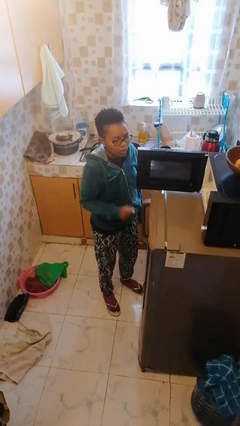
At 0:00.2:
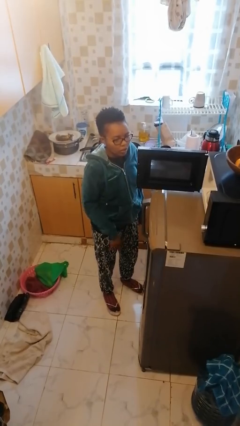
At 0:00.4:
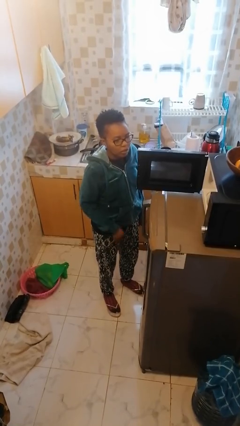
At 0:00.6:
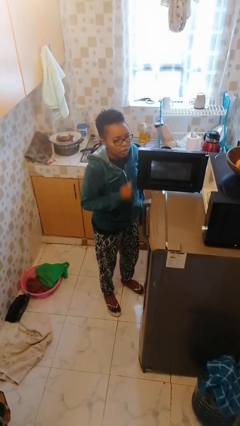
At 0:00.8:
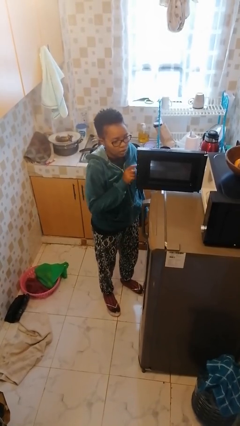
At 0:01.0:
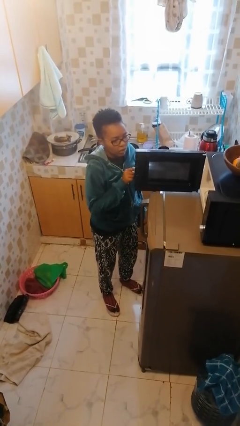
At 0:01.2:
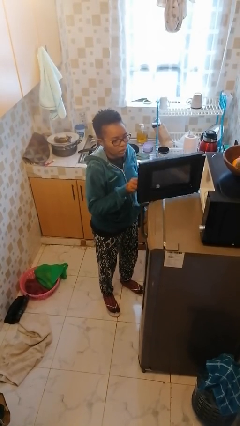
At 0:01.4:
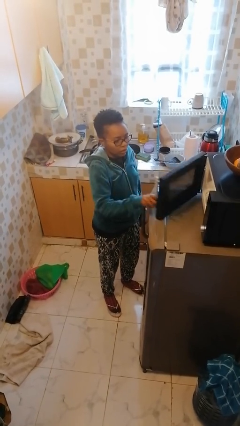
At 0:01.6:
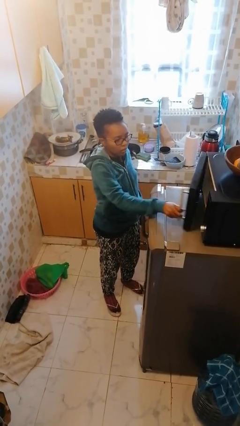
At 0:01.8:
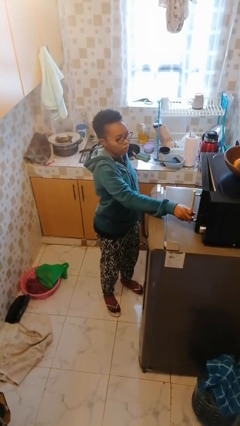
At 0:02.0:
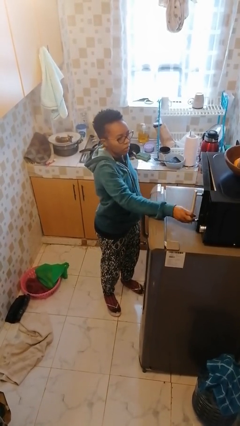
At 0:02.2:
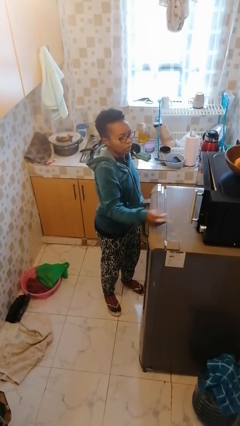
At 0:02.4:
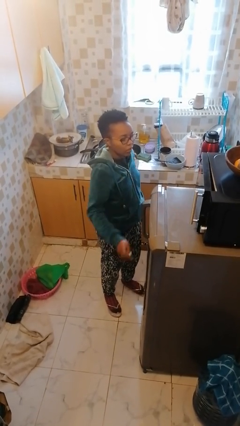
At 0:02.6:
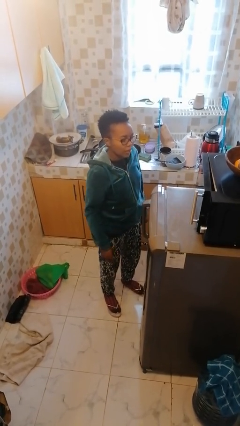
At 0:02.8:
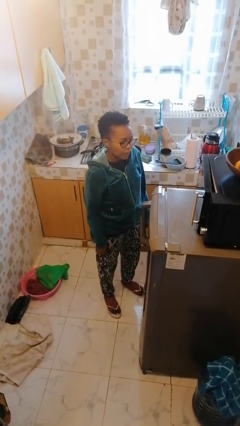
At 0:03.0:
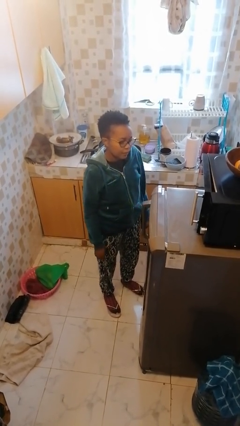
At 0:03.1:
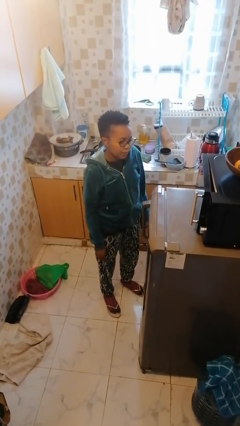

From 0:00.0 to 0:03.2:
person closes microwave

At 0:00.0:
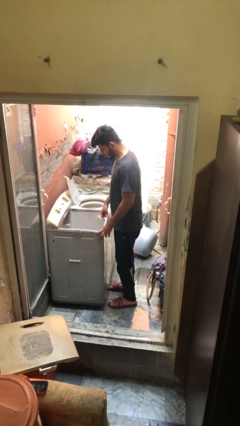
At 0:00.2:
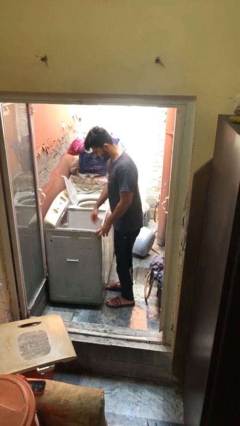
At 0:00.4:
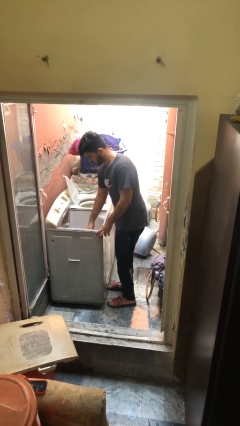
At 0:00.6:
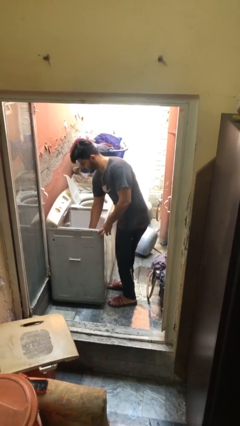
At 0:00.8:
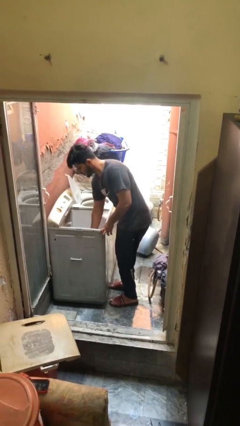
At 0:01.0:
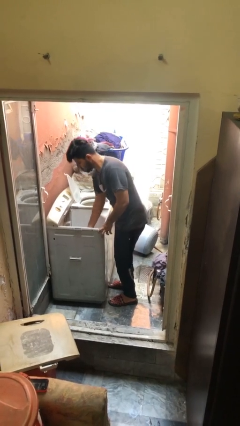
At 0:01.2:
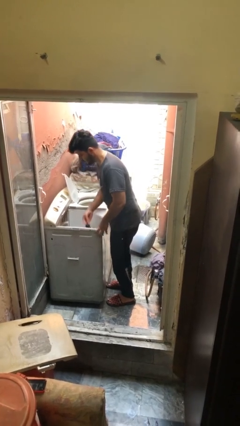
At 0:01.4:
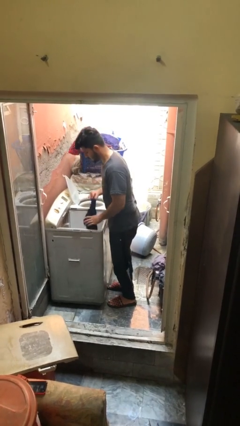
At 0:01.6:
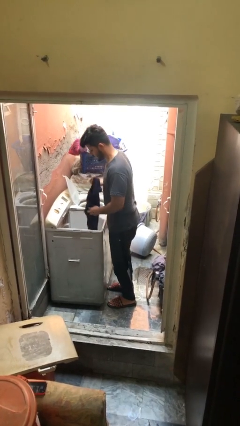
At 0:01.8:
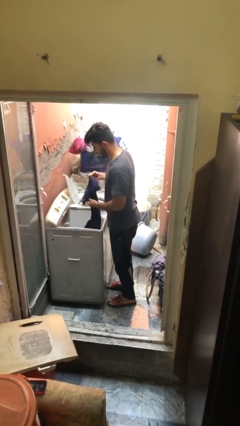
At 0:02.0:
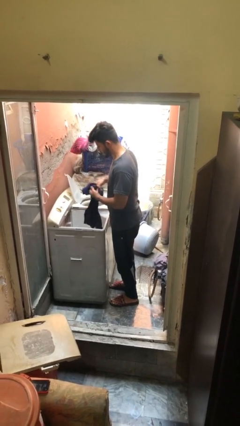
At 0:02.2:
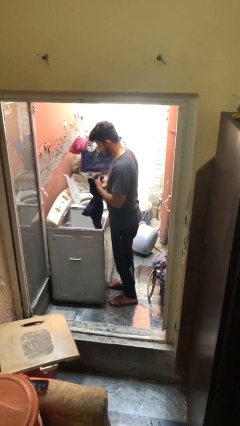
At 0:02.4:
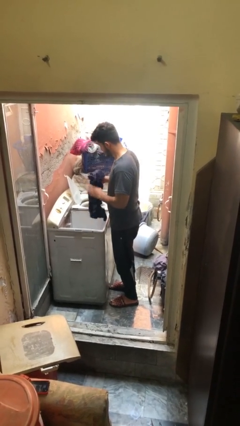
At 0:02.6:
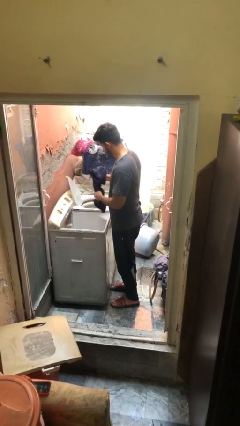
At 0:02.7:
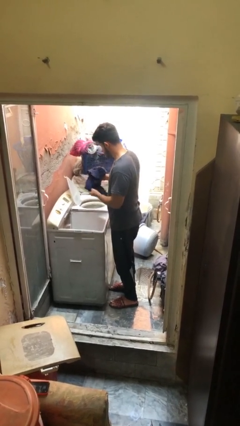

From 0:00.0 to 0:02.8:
person unloads clotheswasher

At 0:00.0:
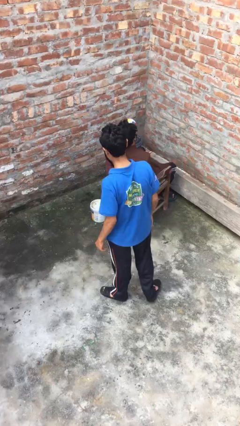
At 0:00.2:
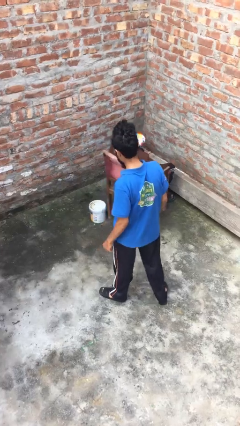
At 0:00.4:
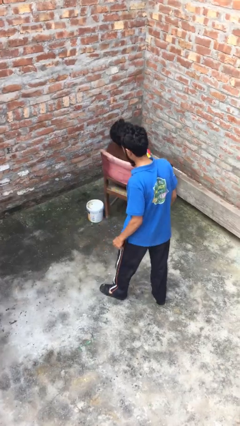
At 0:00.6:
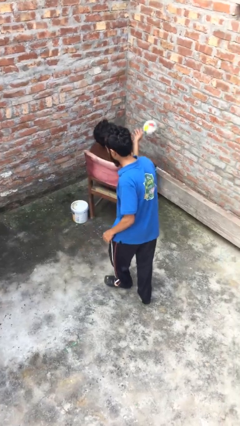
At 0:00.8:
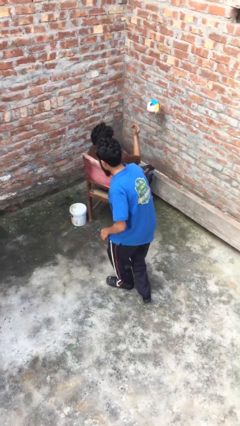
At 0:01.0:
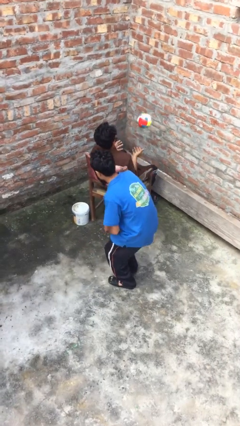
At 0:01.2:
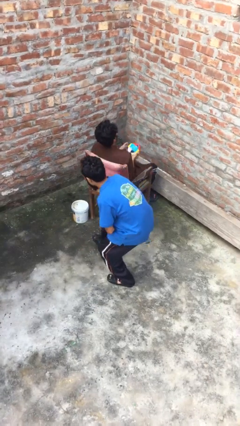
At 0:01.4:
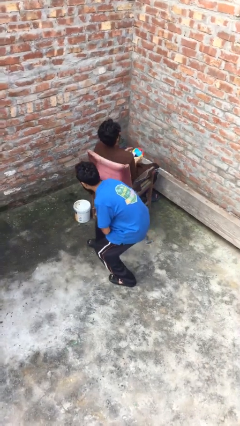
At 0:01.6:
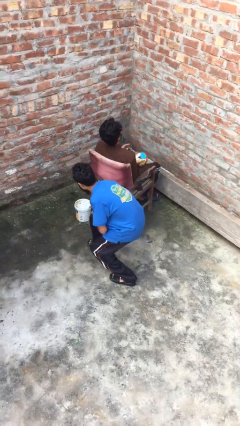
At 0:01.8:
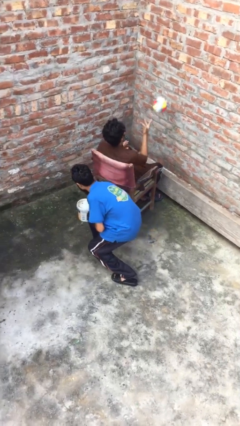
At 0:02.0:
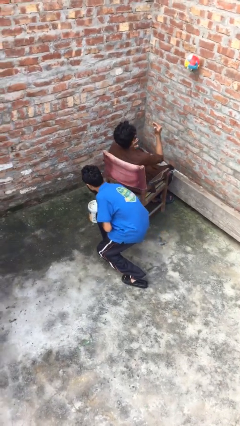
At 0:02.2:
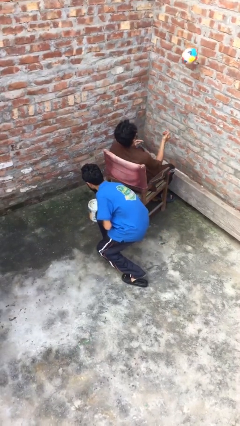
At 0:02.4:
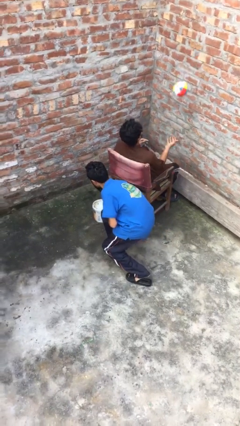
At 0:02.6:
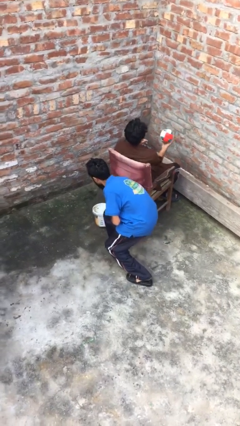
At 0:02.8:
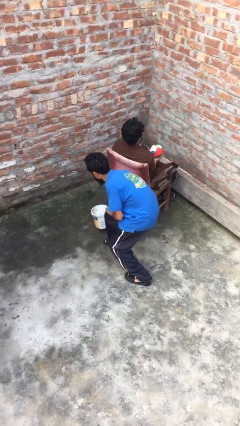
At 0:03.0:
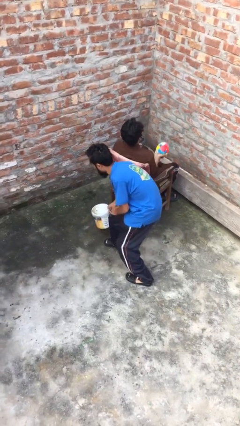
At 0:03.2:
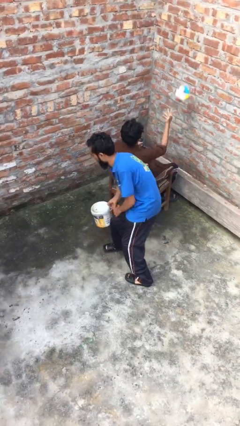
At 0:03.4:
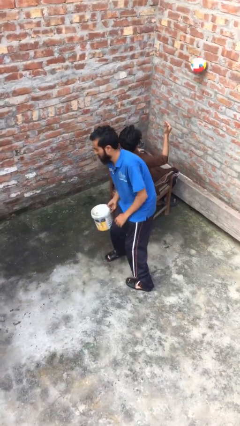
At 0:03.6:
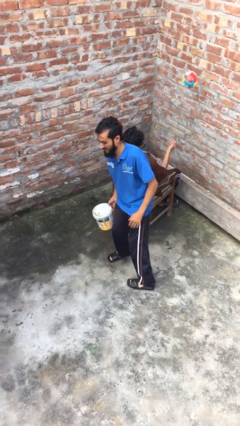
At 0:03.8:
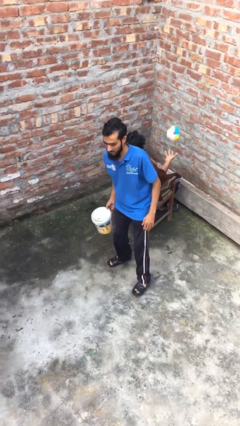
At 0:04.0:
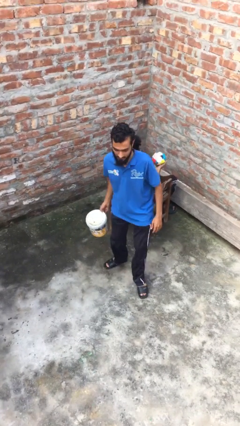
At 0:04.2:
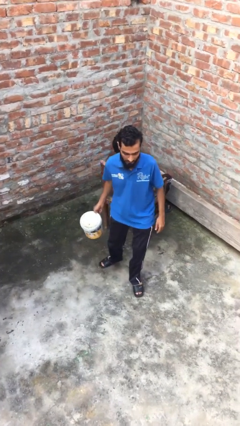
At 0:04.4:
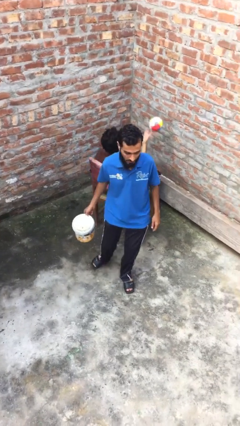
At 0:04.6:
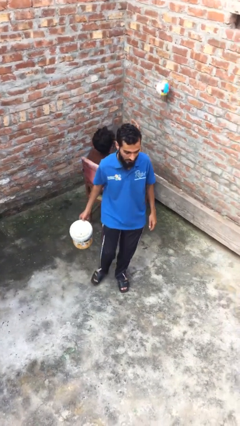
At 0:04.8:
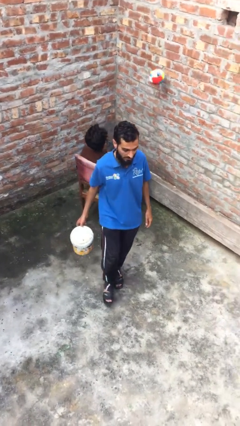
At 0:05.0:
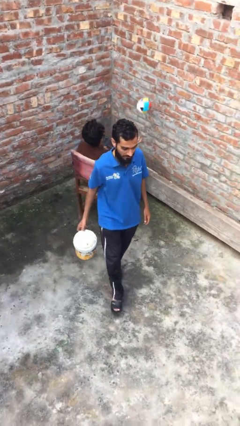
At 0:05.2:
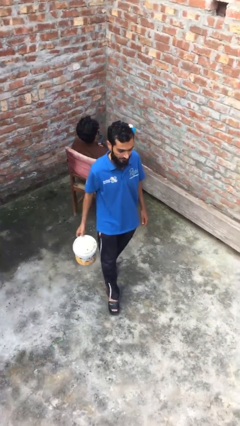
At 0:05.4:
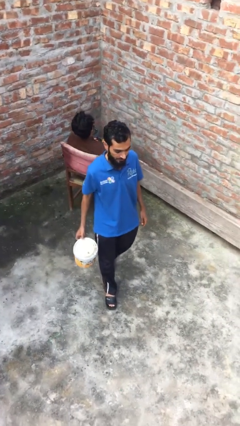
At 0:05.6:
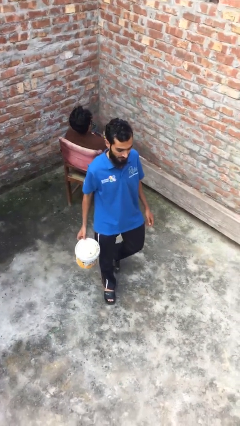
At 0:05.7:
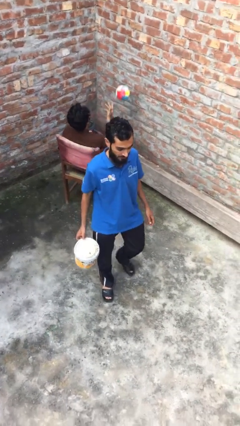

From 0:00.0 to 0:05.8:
person steals object from person

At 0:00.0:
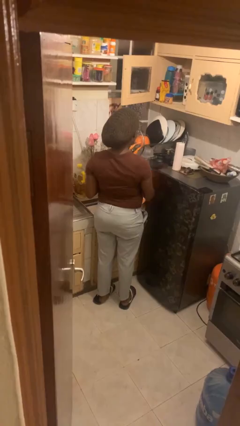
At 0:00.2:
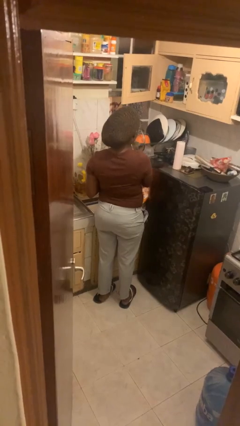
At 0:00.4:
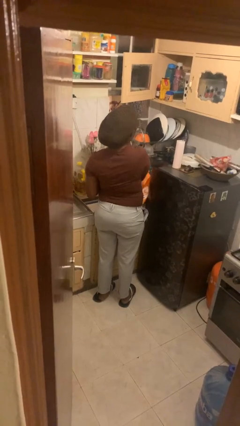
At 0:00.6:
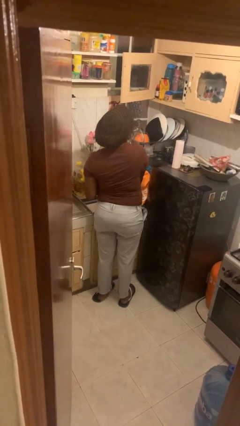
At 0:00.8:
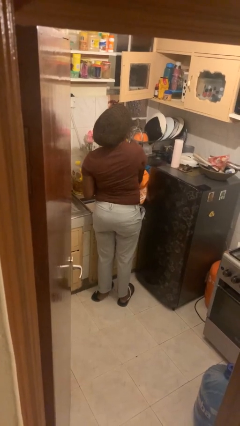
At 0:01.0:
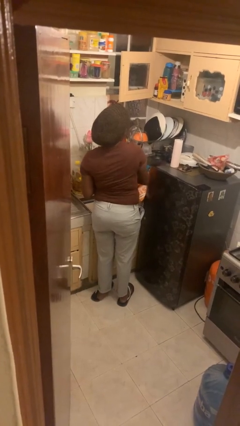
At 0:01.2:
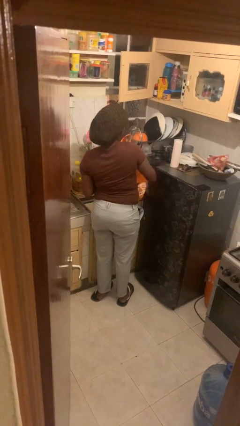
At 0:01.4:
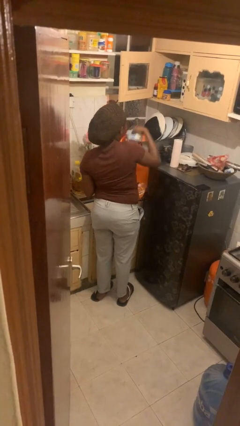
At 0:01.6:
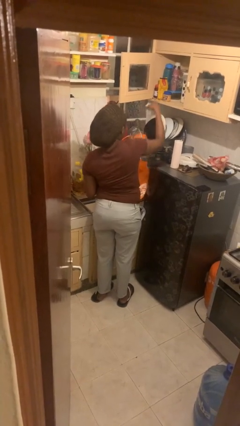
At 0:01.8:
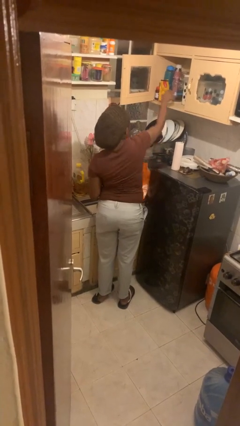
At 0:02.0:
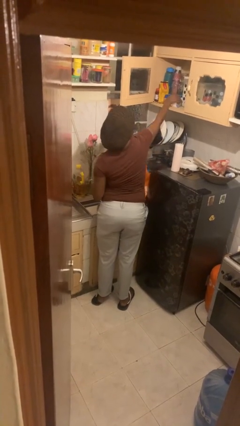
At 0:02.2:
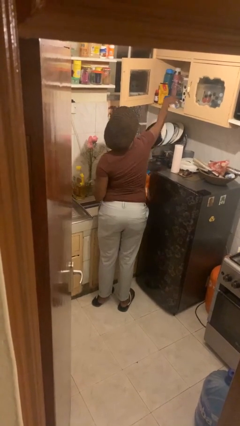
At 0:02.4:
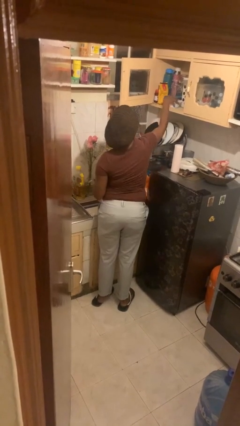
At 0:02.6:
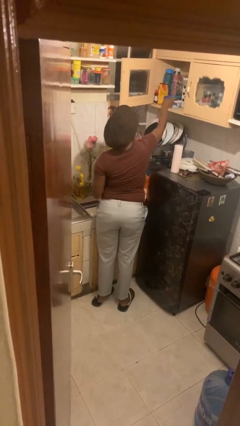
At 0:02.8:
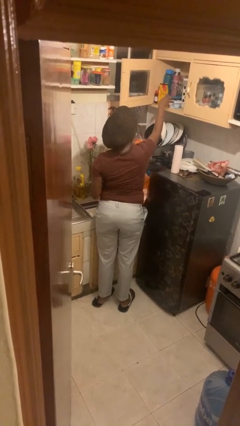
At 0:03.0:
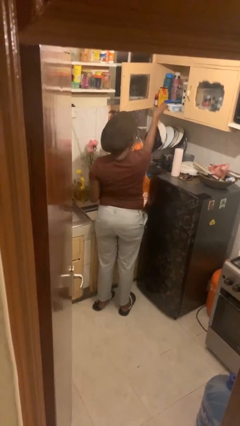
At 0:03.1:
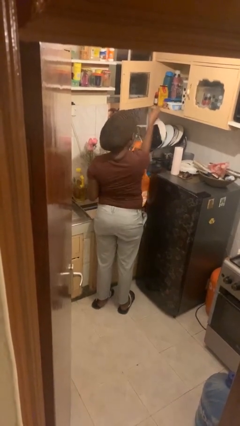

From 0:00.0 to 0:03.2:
person loads groceries into cabinet

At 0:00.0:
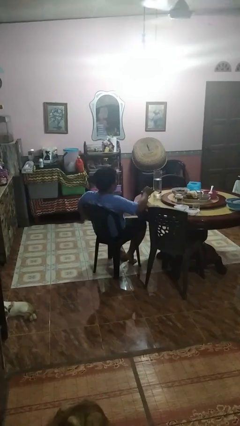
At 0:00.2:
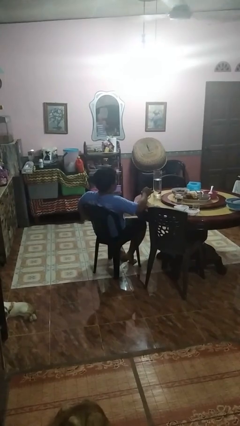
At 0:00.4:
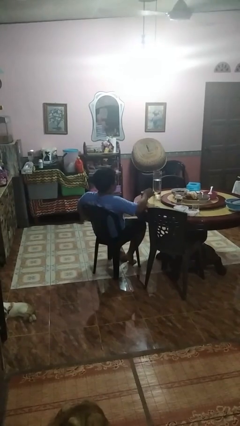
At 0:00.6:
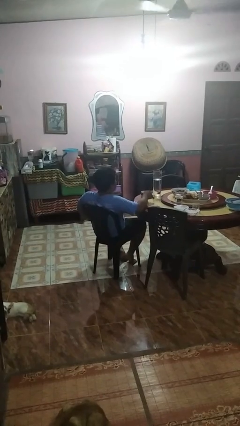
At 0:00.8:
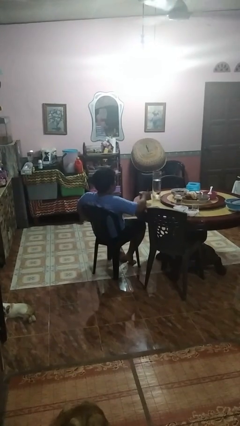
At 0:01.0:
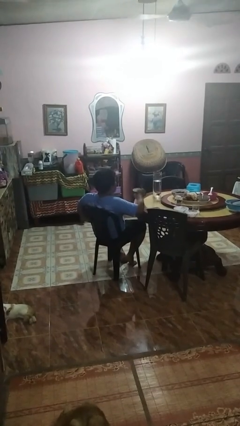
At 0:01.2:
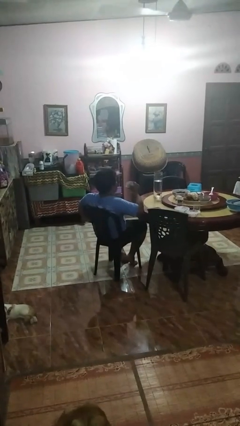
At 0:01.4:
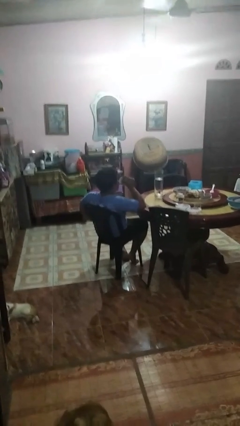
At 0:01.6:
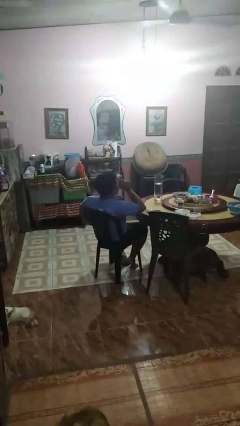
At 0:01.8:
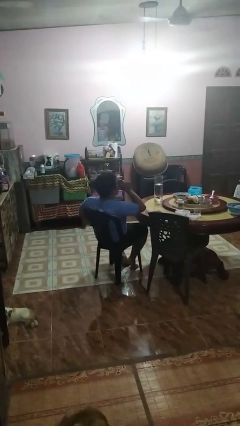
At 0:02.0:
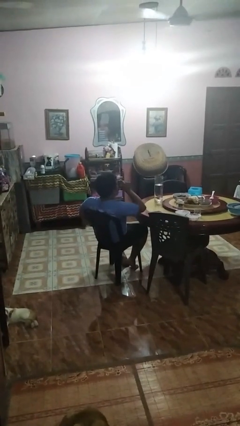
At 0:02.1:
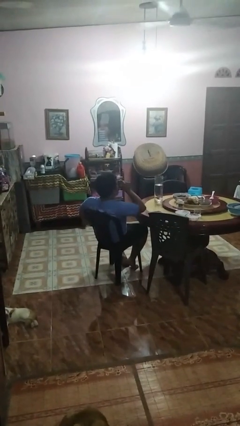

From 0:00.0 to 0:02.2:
person stirs mug
